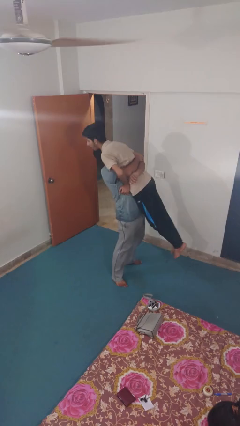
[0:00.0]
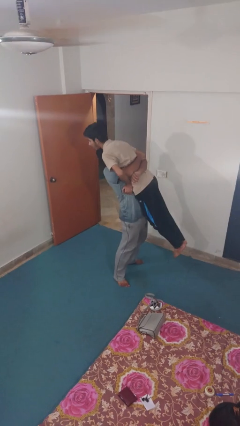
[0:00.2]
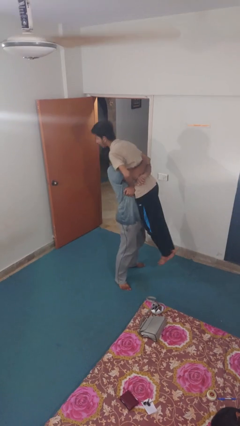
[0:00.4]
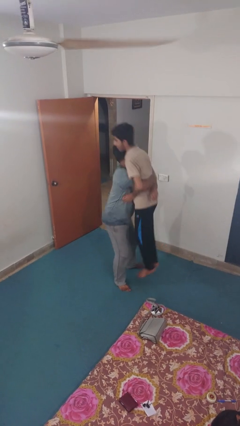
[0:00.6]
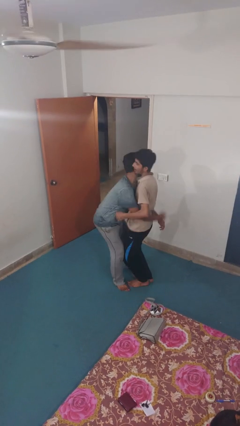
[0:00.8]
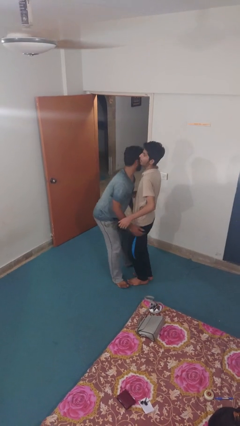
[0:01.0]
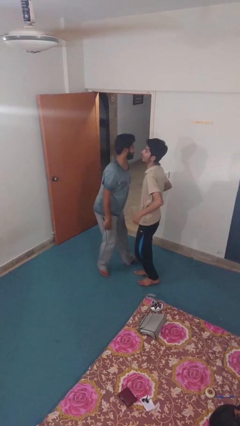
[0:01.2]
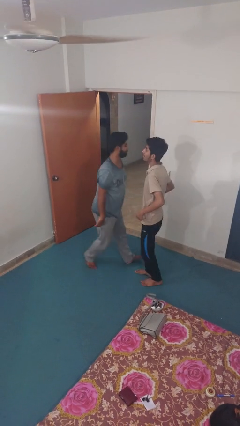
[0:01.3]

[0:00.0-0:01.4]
person puts down person

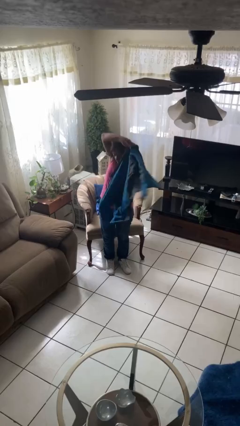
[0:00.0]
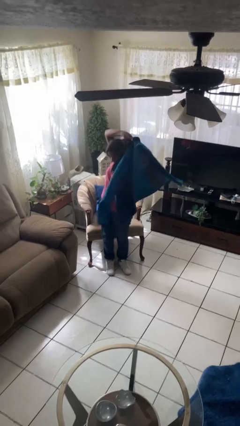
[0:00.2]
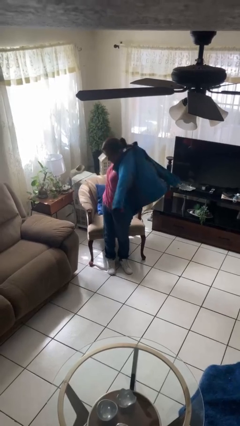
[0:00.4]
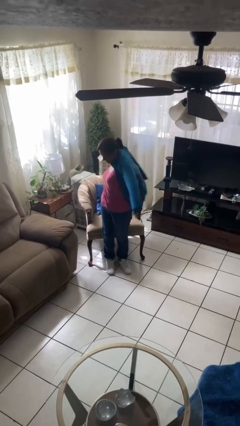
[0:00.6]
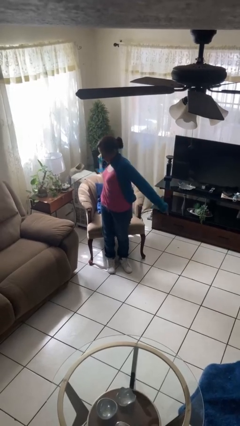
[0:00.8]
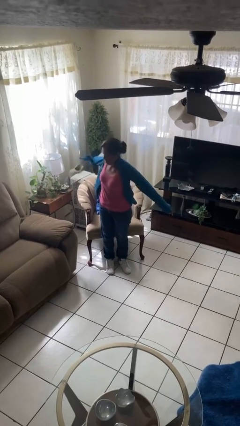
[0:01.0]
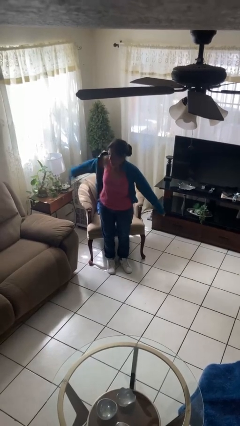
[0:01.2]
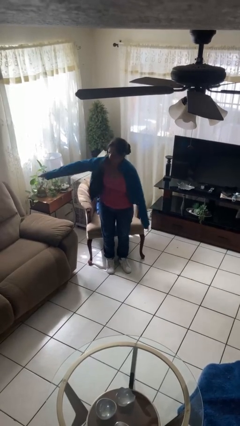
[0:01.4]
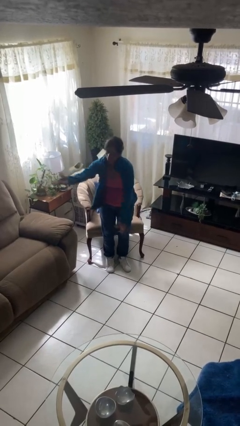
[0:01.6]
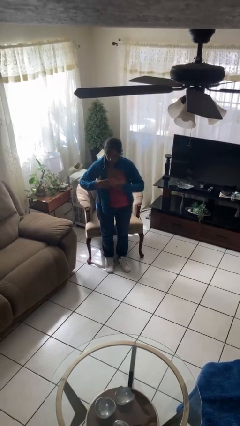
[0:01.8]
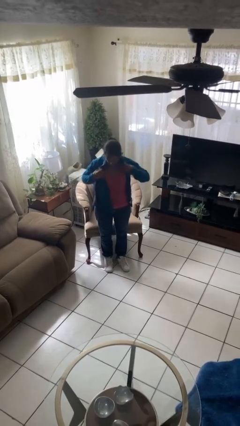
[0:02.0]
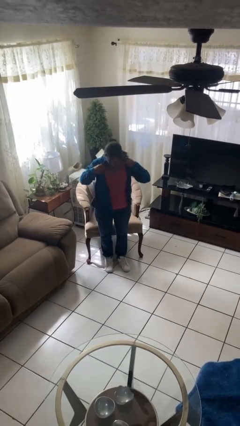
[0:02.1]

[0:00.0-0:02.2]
person puts on jacket

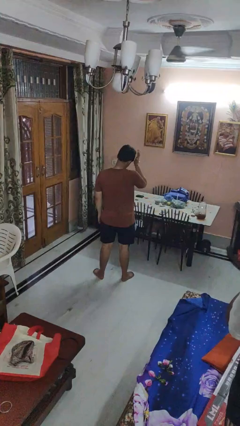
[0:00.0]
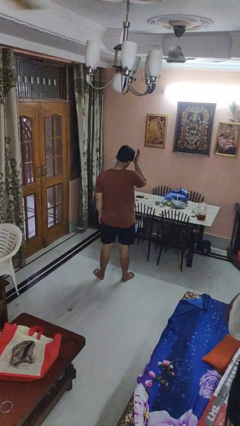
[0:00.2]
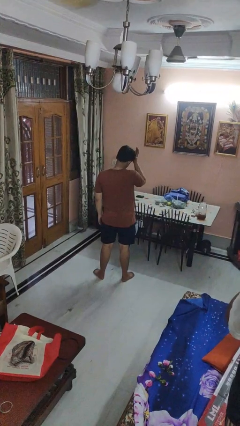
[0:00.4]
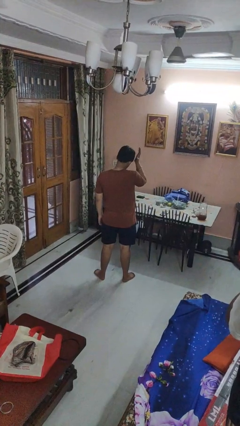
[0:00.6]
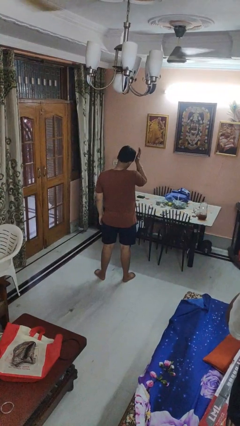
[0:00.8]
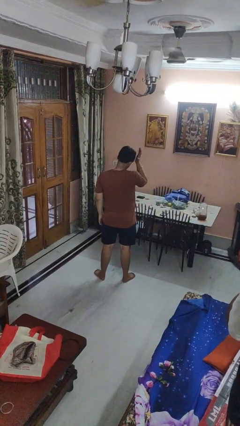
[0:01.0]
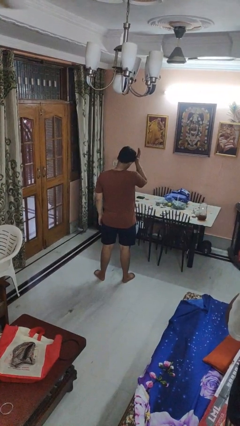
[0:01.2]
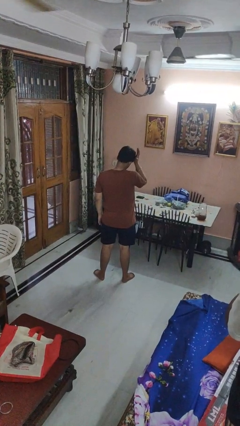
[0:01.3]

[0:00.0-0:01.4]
person pats head

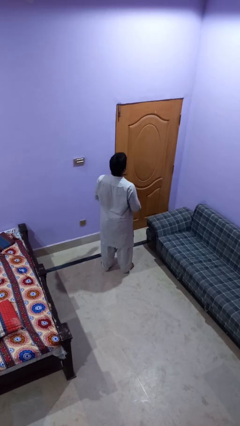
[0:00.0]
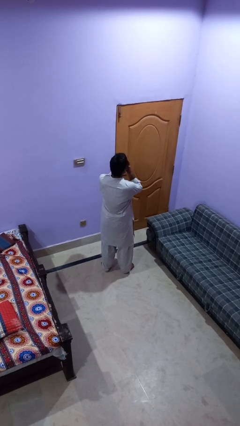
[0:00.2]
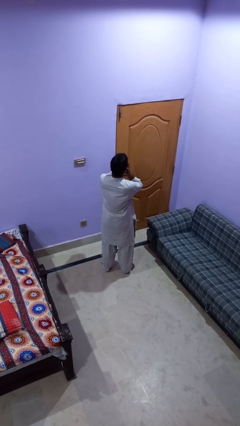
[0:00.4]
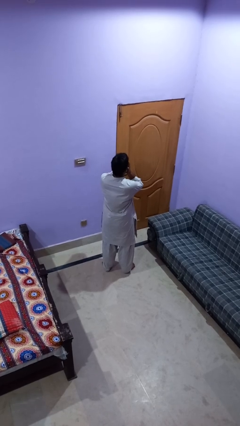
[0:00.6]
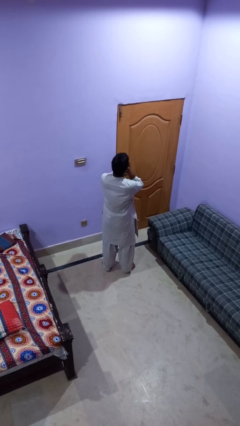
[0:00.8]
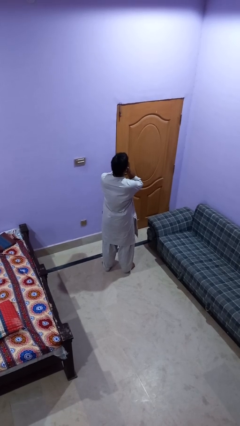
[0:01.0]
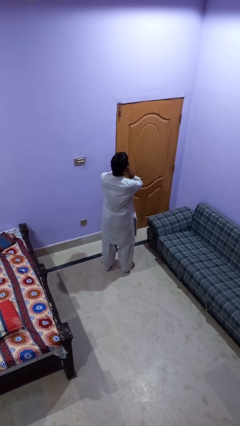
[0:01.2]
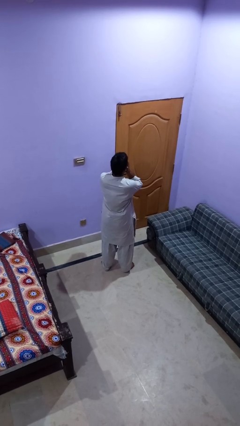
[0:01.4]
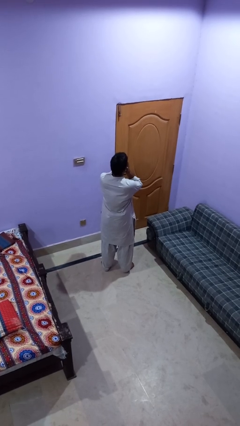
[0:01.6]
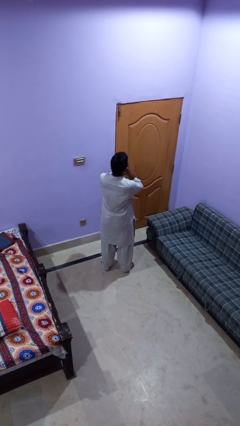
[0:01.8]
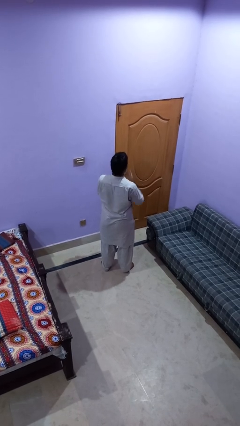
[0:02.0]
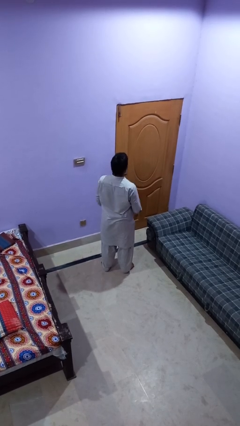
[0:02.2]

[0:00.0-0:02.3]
person covers face with hands

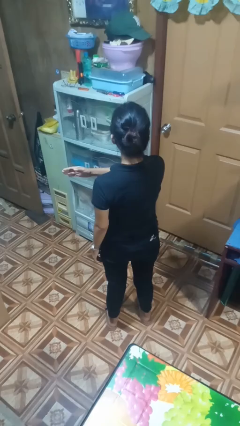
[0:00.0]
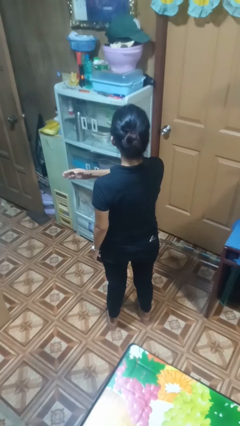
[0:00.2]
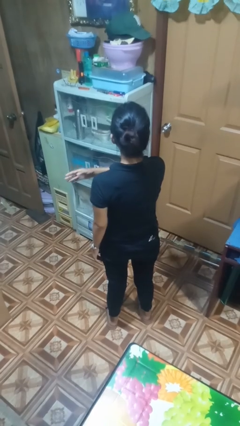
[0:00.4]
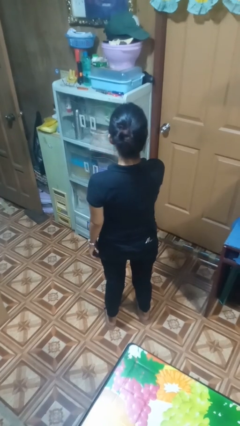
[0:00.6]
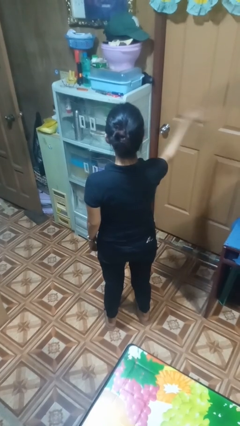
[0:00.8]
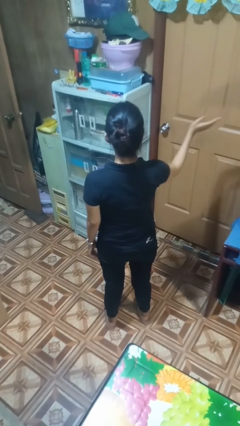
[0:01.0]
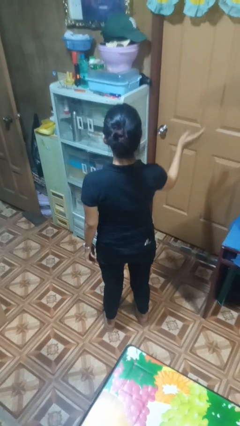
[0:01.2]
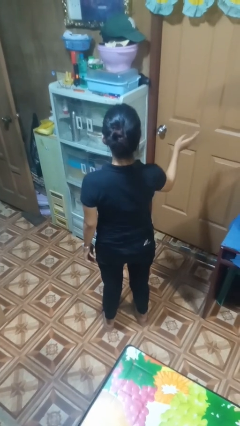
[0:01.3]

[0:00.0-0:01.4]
person gestures swipe right

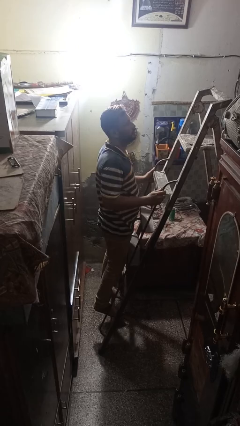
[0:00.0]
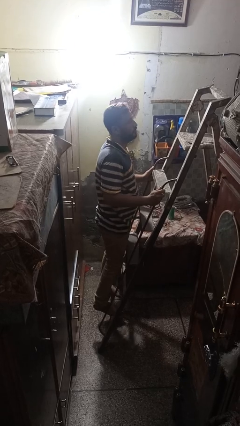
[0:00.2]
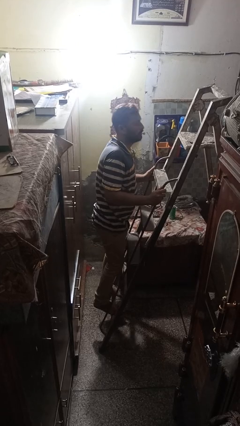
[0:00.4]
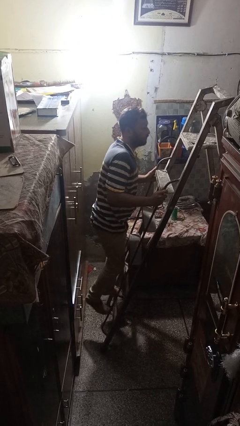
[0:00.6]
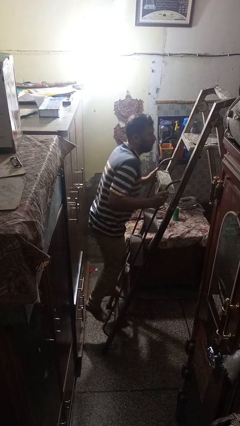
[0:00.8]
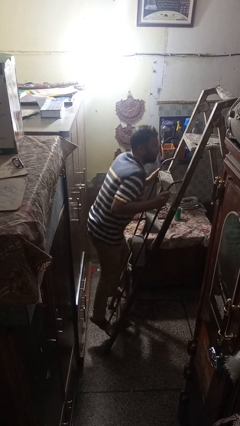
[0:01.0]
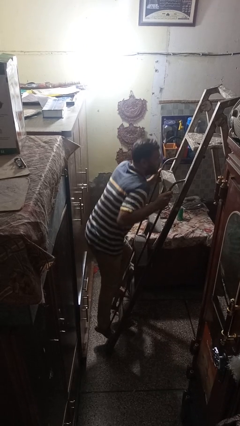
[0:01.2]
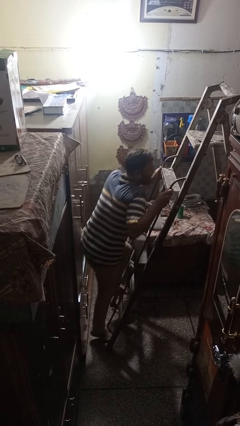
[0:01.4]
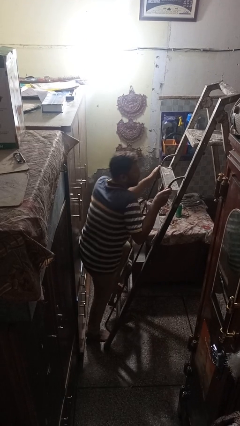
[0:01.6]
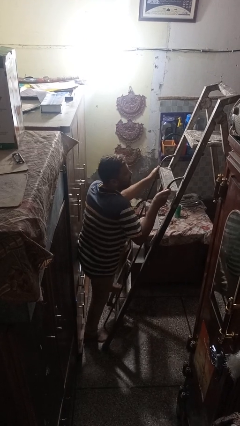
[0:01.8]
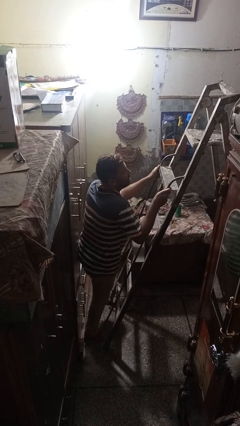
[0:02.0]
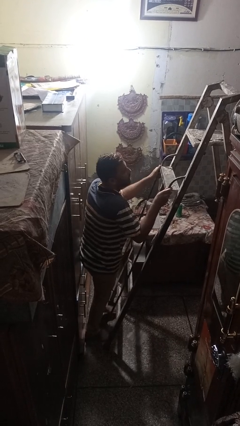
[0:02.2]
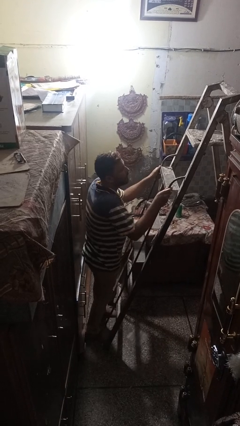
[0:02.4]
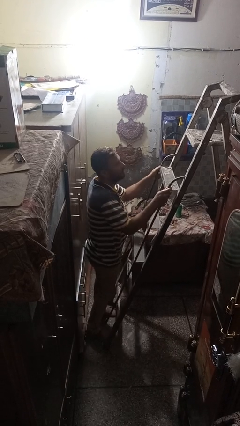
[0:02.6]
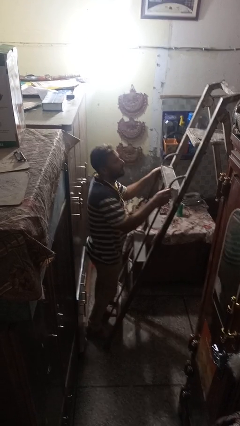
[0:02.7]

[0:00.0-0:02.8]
person climbs down ladder

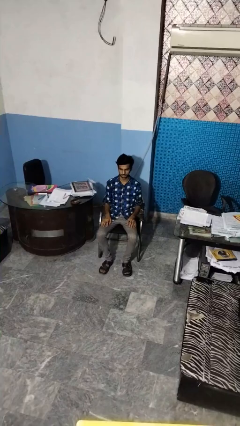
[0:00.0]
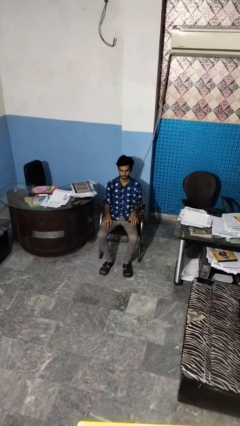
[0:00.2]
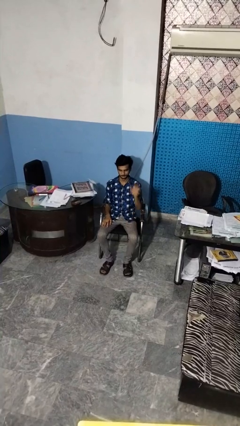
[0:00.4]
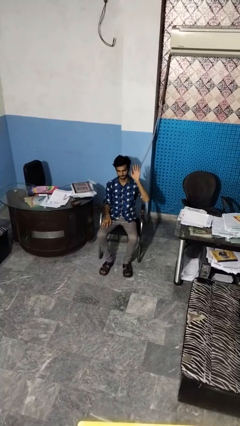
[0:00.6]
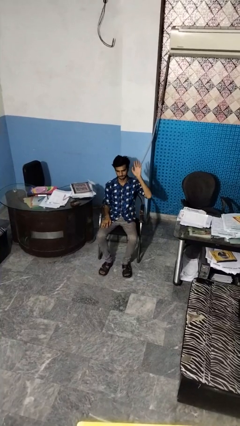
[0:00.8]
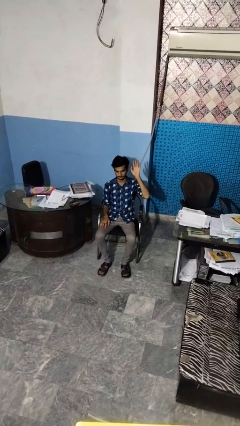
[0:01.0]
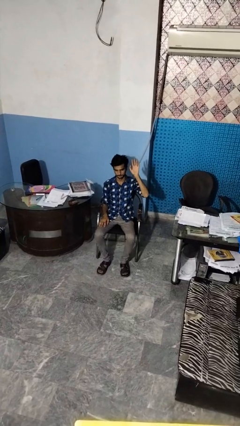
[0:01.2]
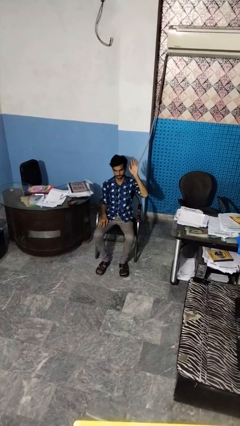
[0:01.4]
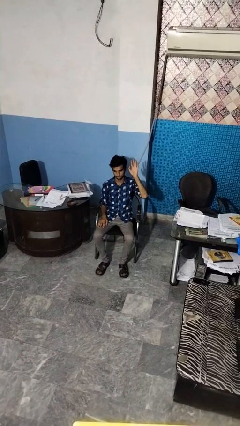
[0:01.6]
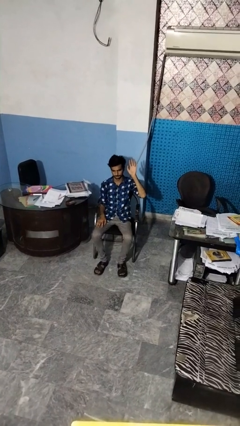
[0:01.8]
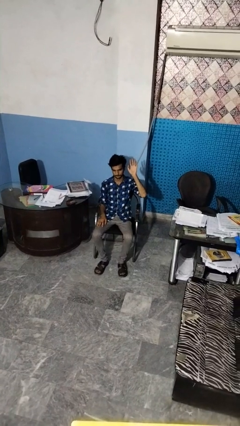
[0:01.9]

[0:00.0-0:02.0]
person gestures raise hand

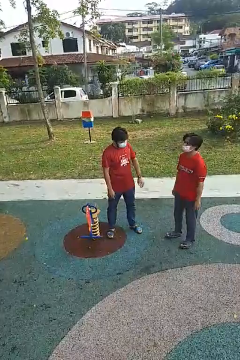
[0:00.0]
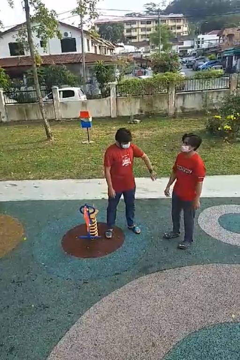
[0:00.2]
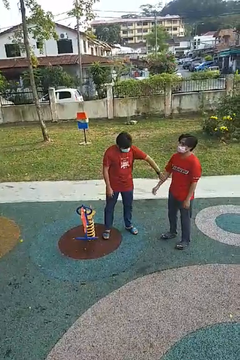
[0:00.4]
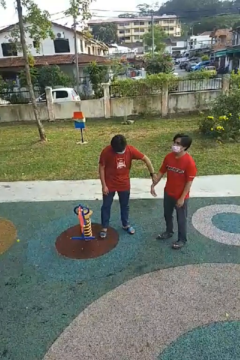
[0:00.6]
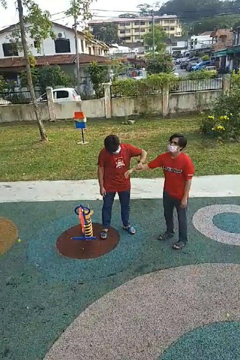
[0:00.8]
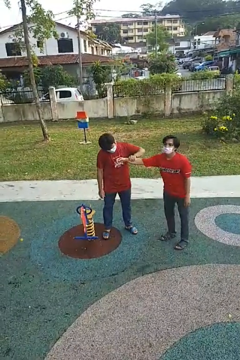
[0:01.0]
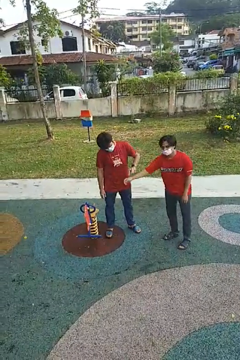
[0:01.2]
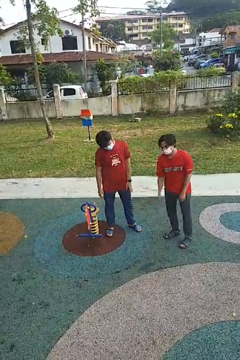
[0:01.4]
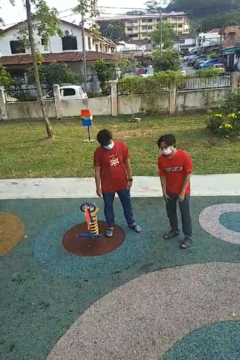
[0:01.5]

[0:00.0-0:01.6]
person grabs person by forearm

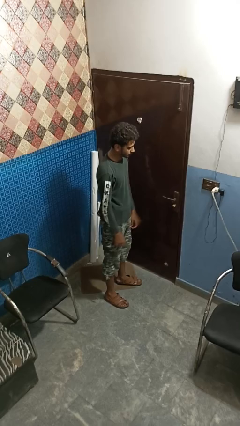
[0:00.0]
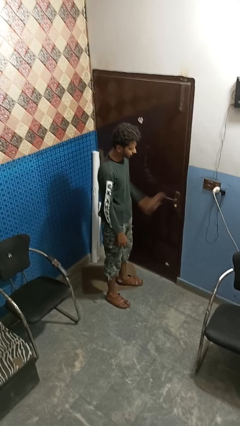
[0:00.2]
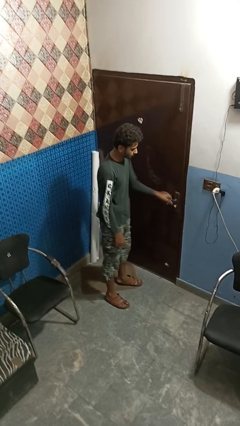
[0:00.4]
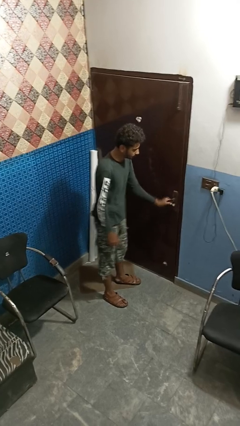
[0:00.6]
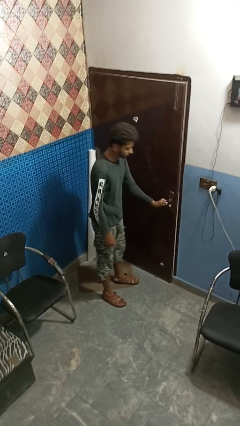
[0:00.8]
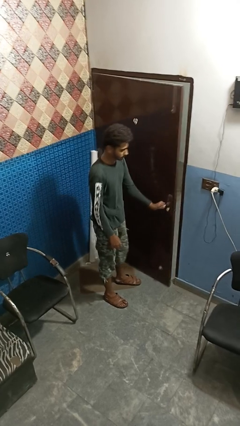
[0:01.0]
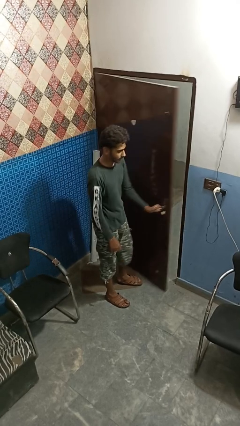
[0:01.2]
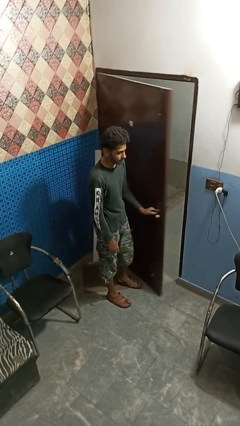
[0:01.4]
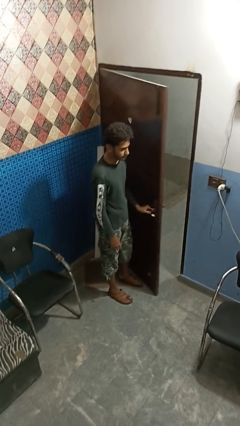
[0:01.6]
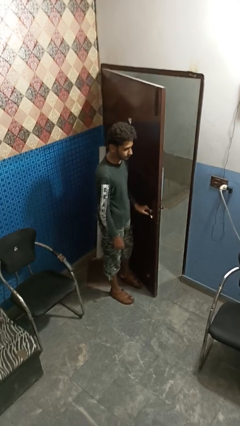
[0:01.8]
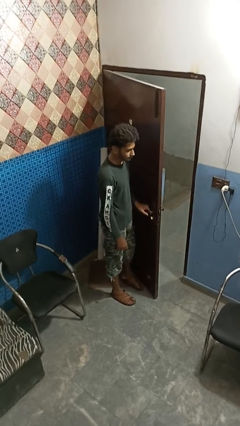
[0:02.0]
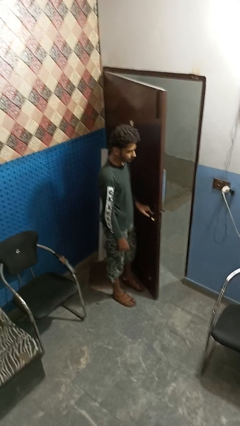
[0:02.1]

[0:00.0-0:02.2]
person opens facility door
